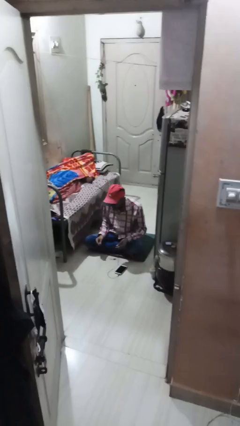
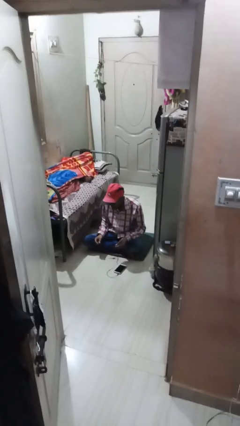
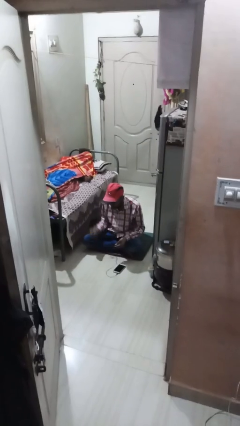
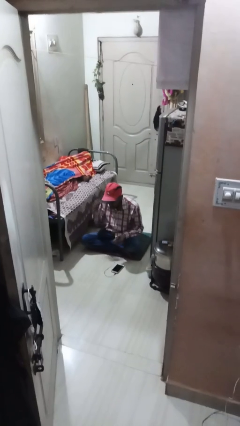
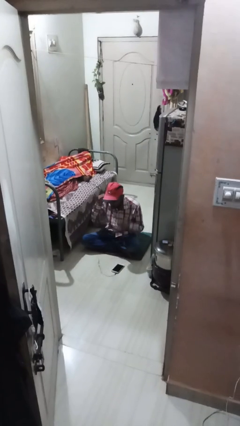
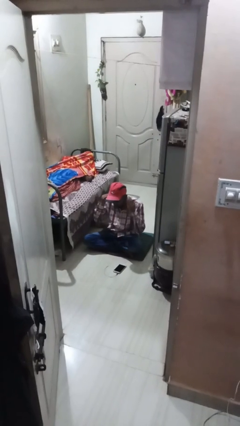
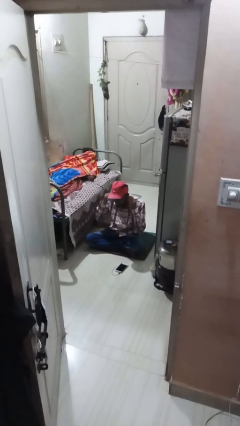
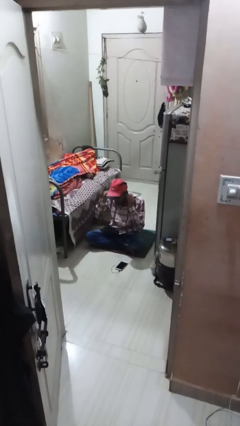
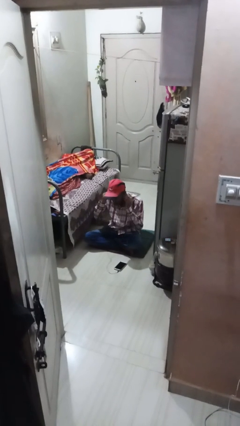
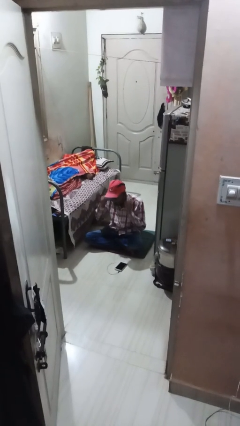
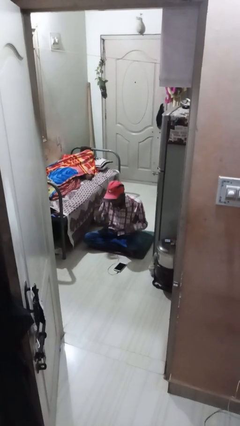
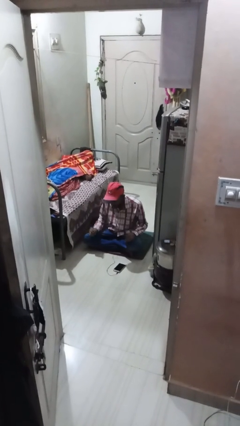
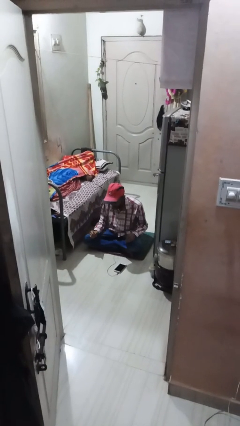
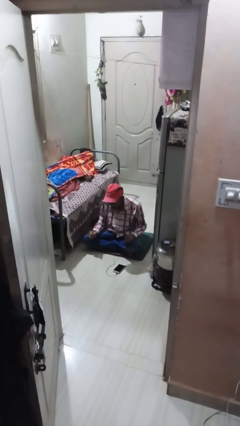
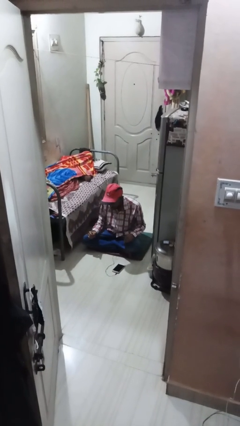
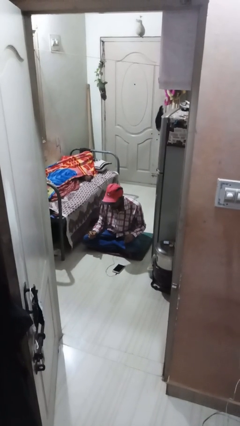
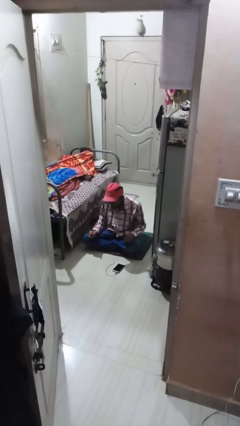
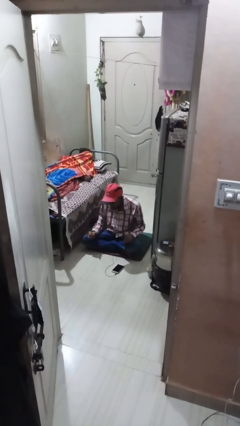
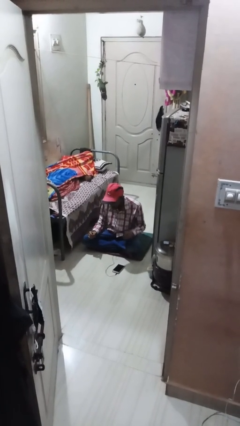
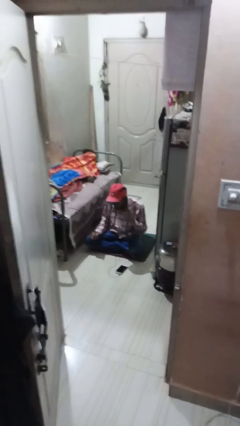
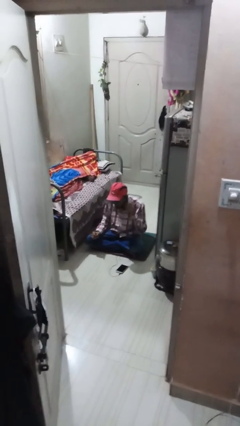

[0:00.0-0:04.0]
person puts on headphones

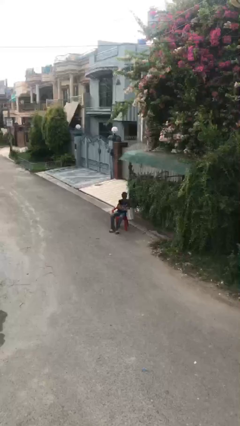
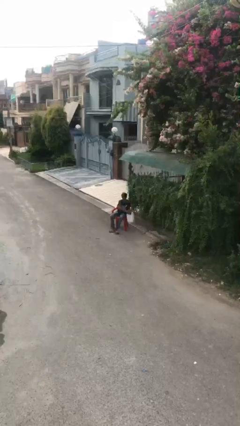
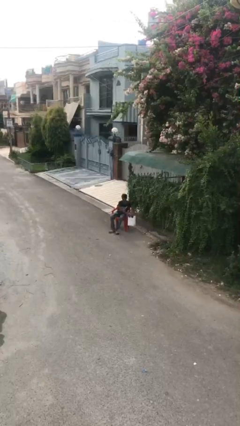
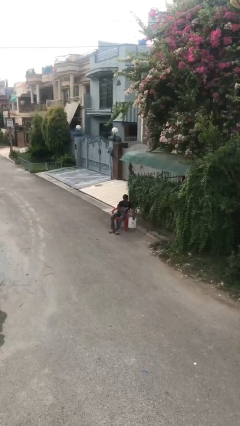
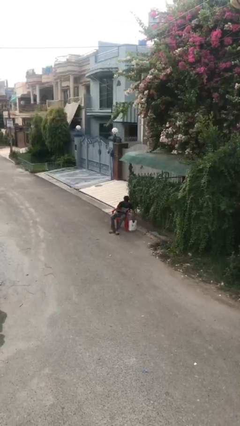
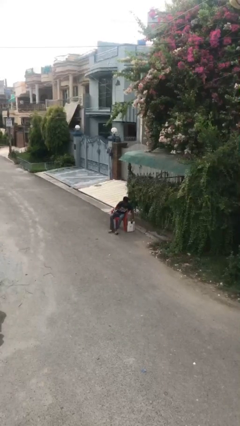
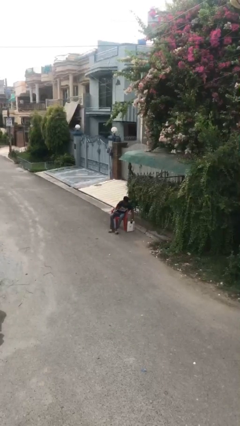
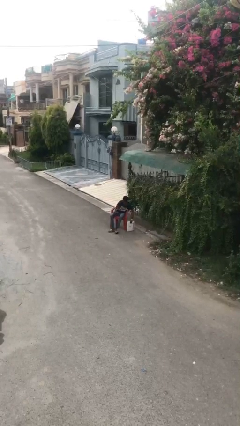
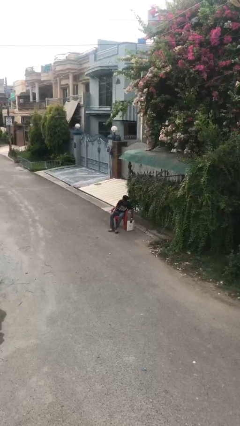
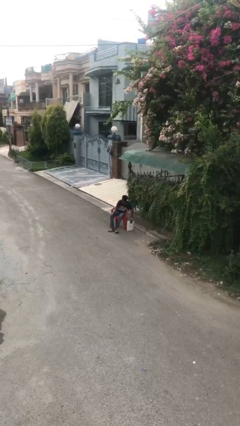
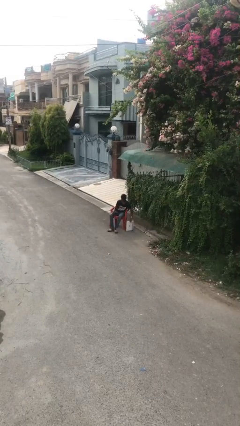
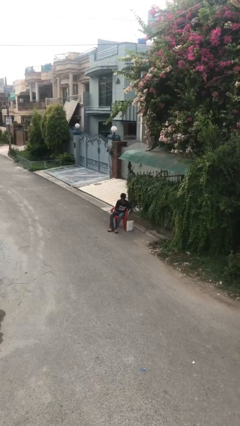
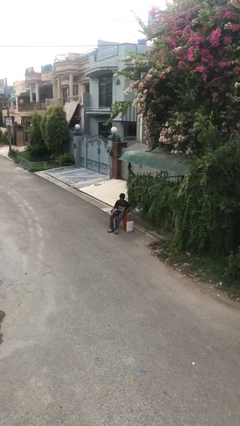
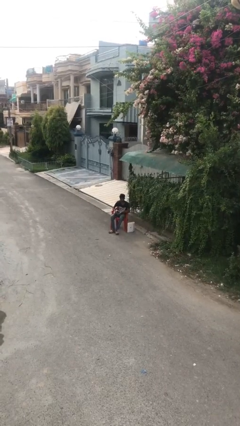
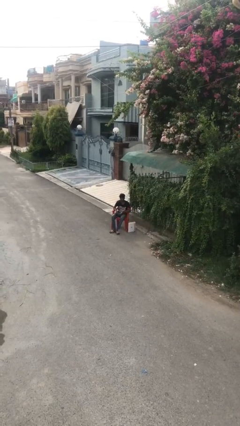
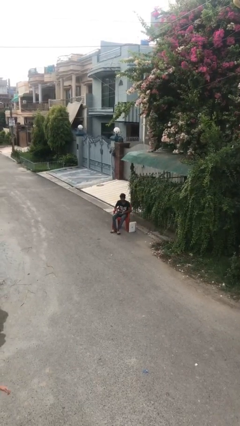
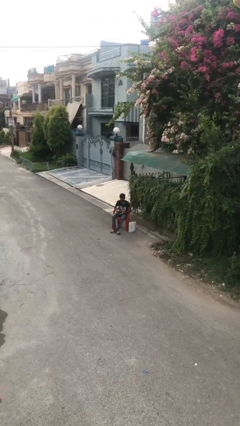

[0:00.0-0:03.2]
person puts down object on floor

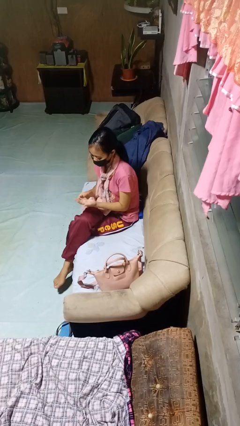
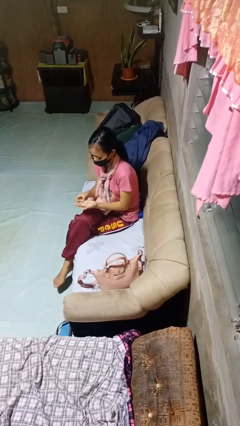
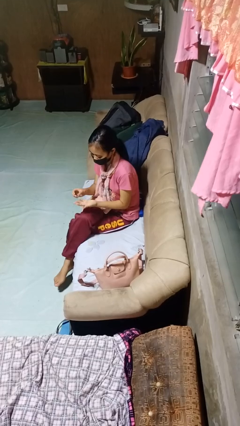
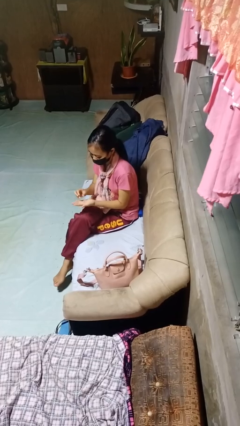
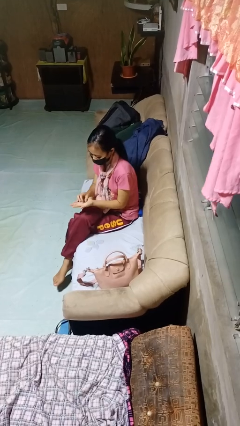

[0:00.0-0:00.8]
person takes off ring

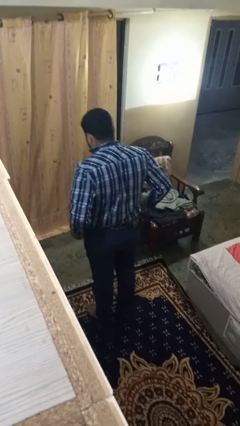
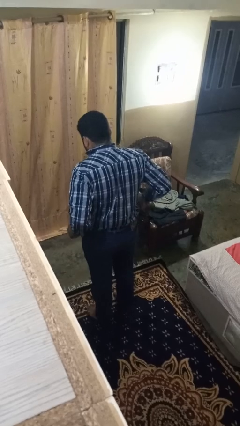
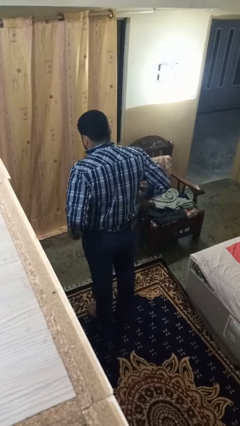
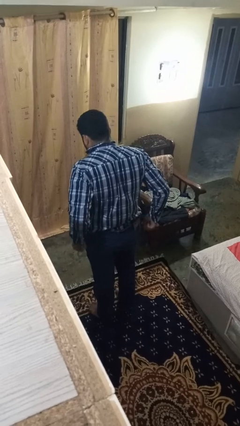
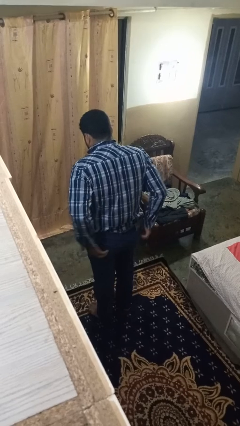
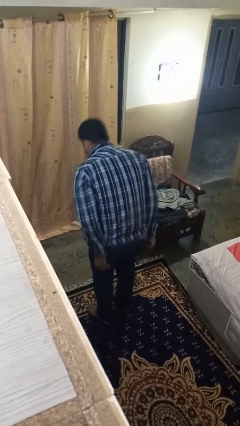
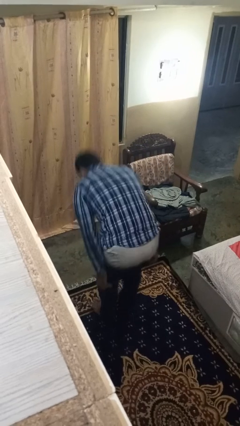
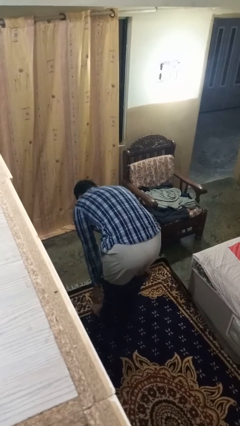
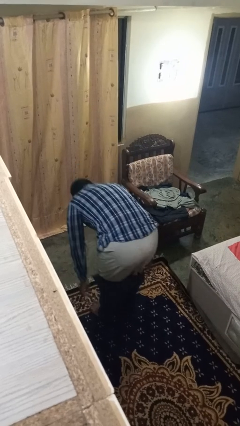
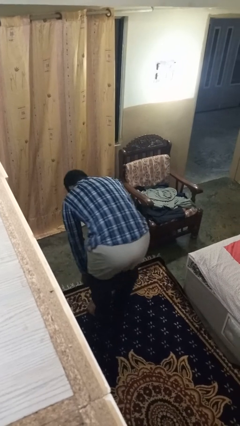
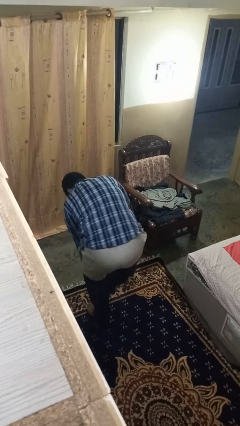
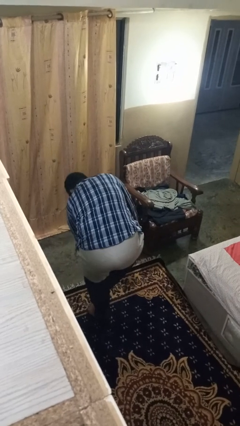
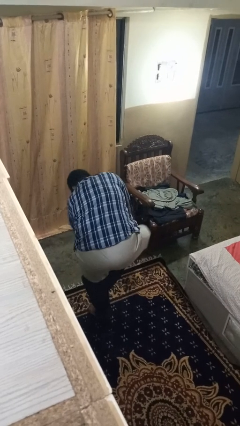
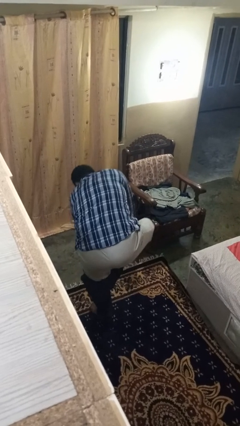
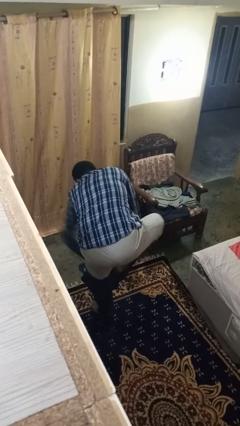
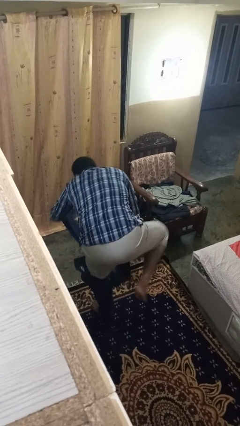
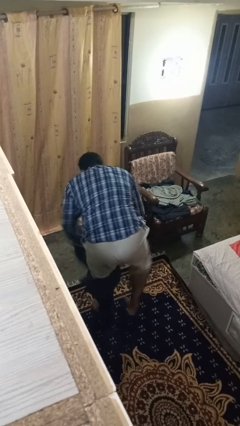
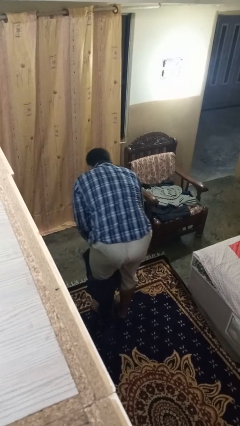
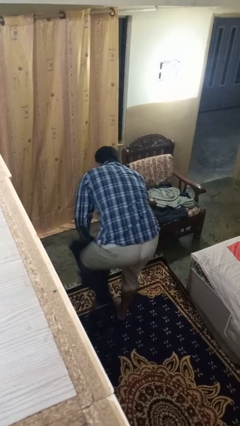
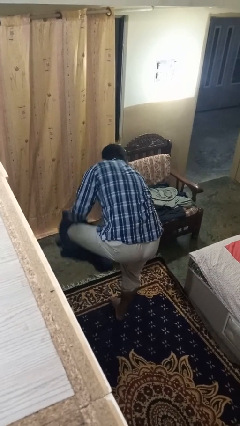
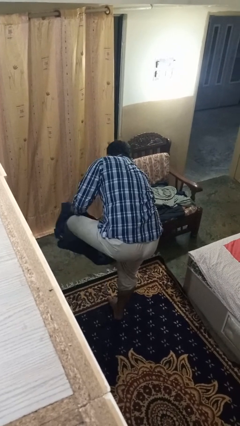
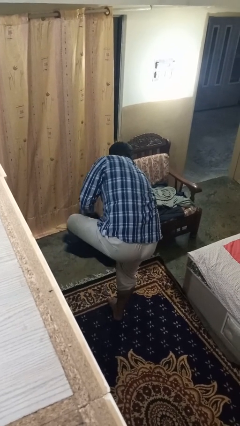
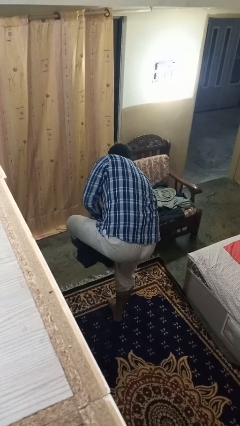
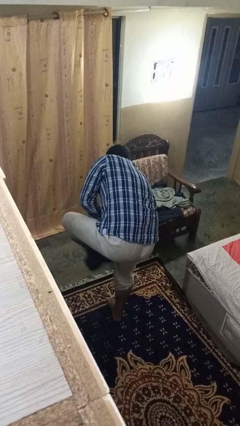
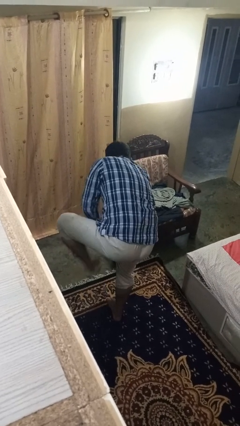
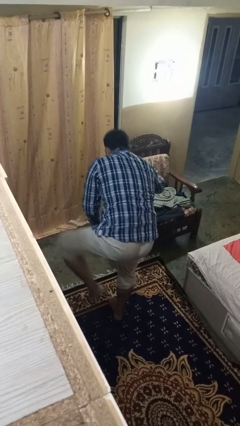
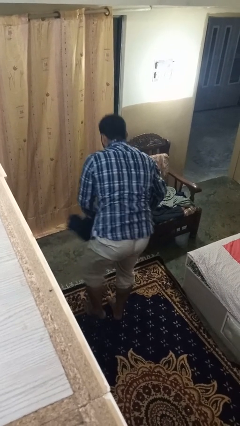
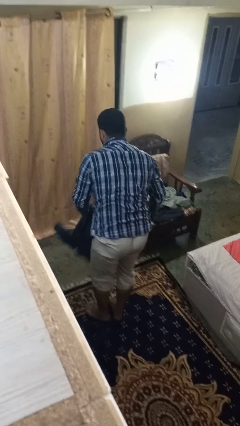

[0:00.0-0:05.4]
person takes off pants

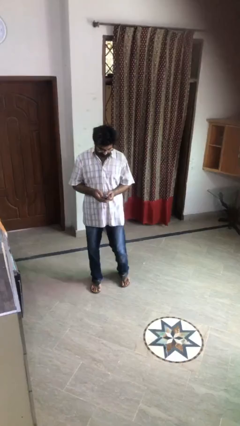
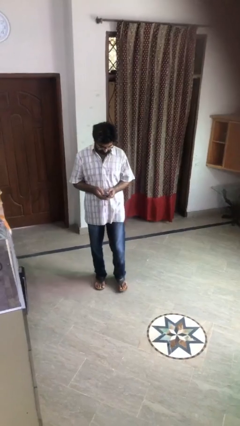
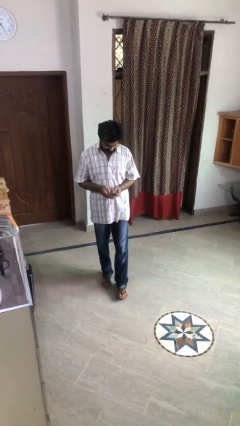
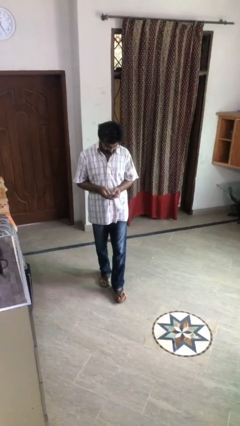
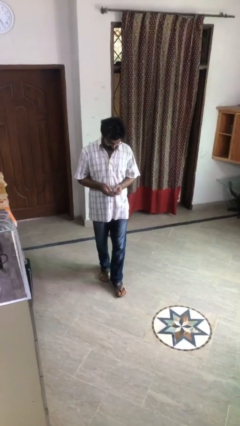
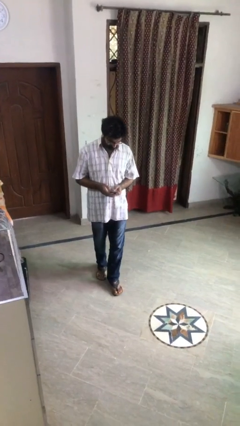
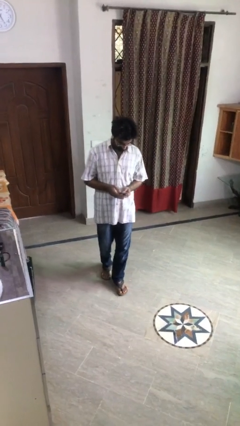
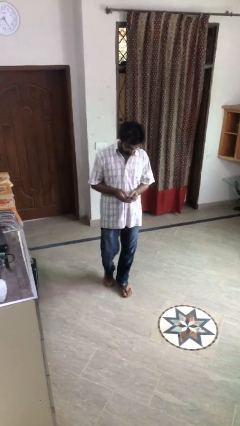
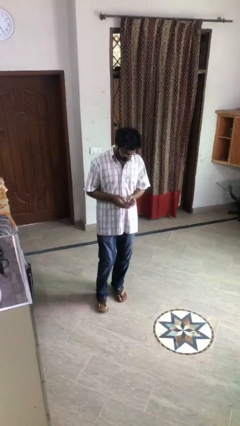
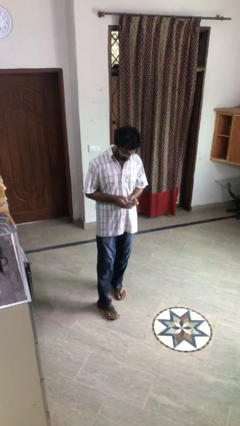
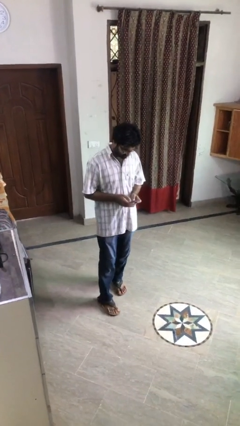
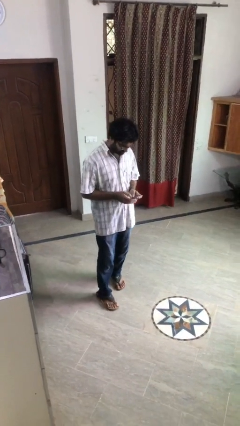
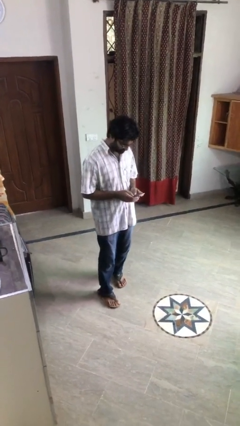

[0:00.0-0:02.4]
person texts on phone

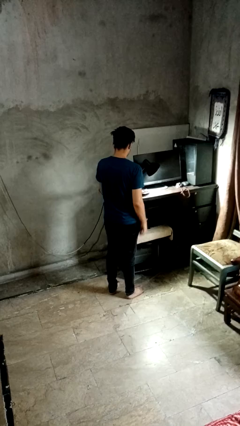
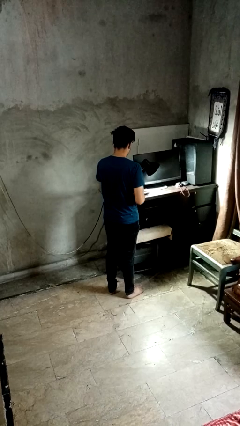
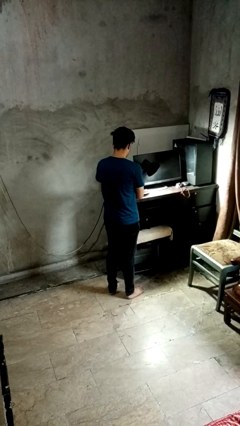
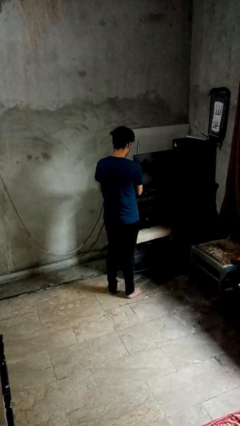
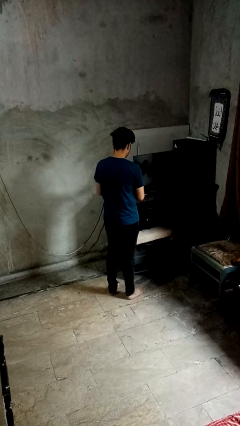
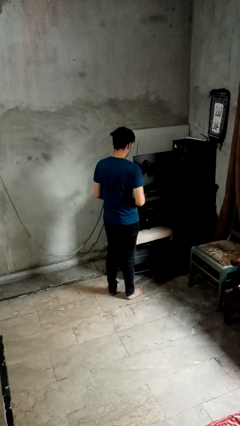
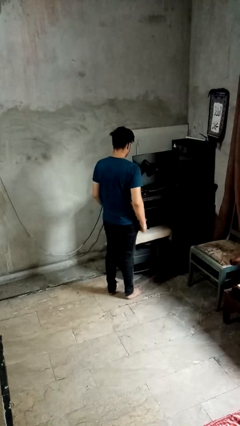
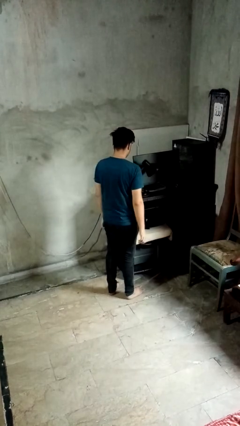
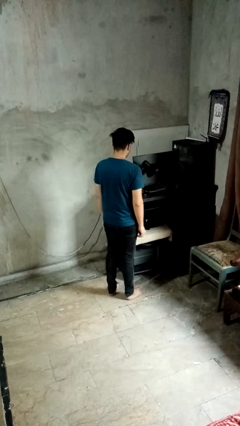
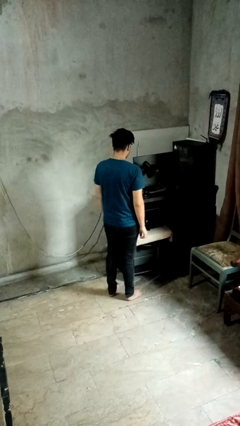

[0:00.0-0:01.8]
person turns off lamp
